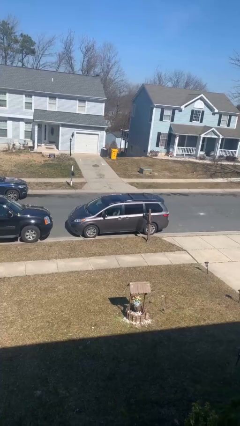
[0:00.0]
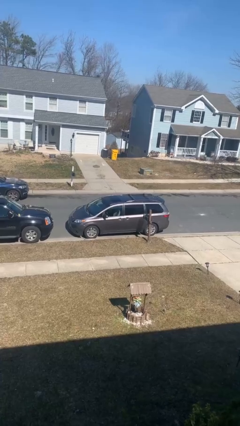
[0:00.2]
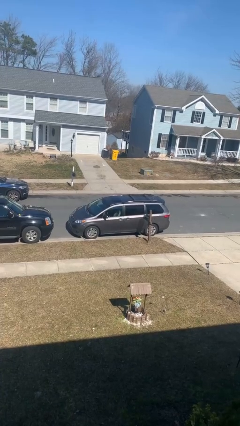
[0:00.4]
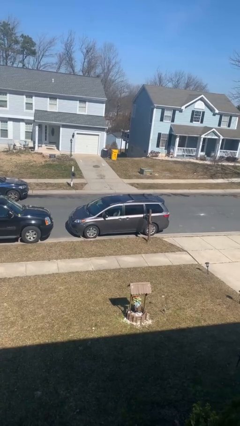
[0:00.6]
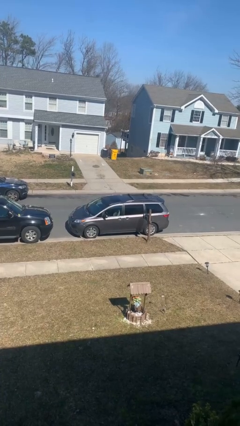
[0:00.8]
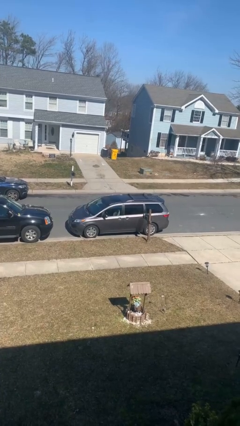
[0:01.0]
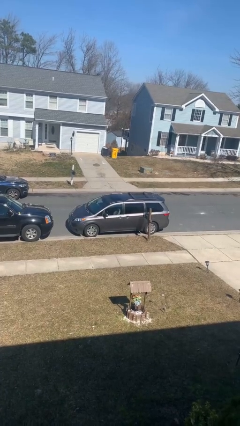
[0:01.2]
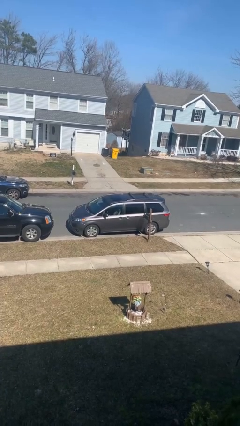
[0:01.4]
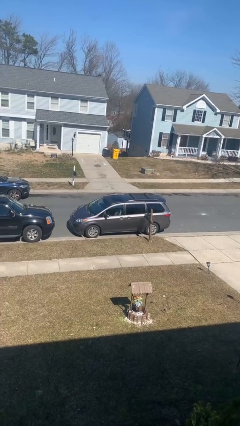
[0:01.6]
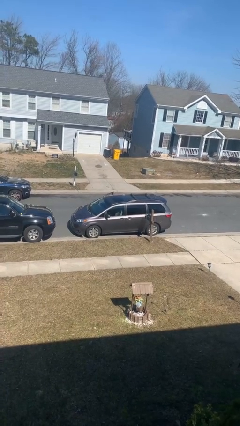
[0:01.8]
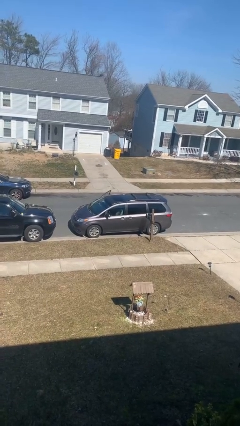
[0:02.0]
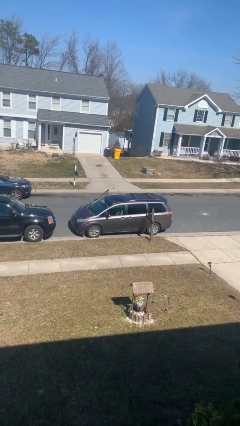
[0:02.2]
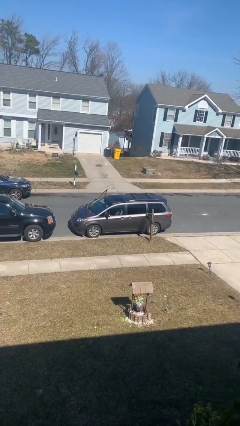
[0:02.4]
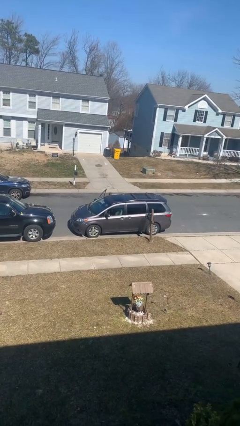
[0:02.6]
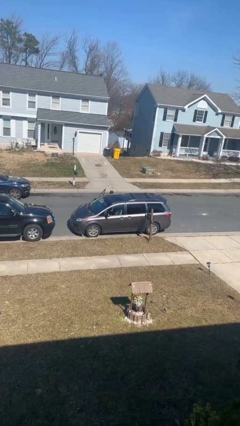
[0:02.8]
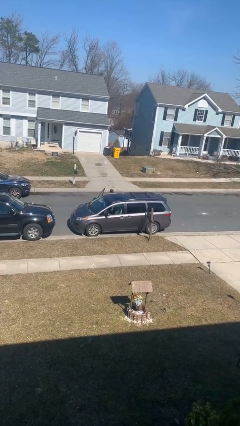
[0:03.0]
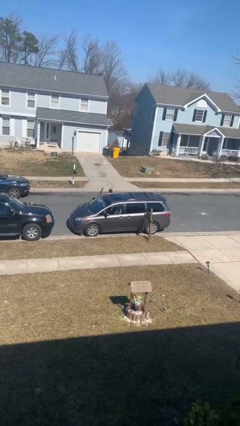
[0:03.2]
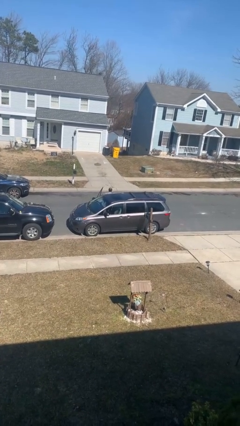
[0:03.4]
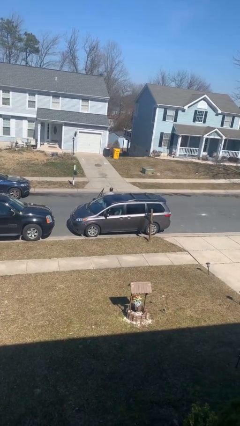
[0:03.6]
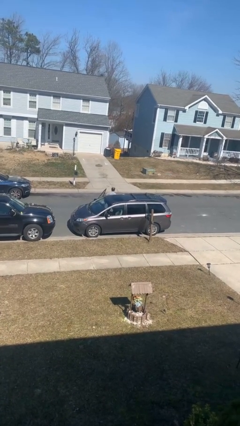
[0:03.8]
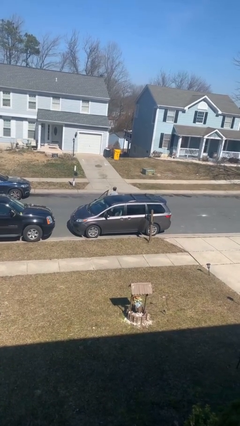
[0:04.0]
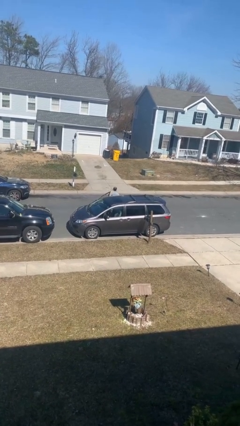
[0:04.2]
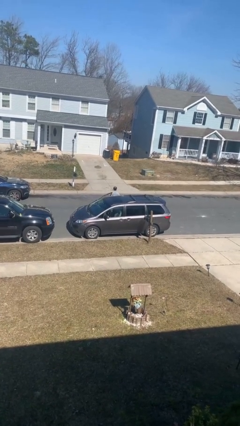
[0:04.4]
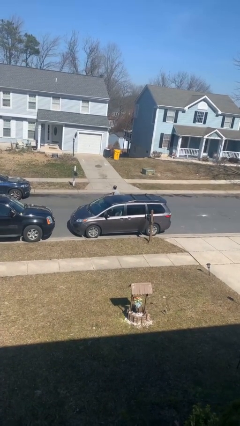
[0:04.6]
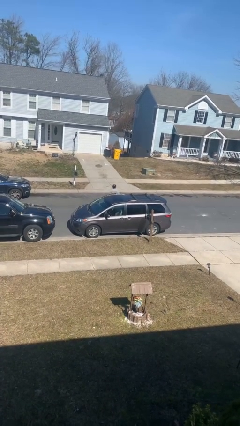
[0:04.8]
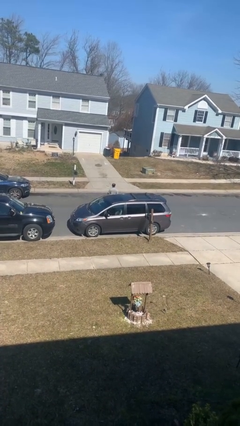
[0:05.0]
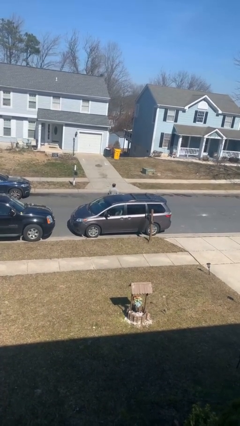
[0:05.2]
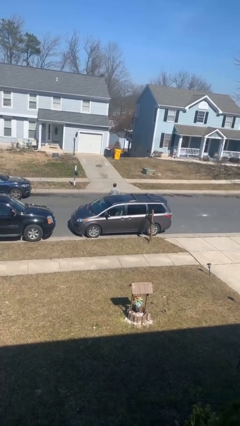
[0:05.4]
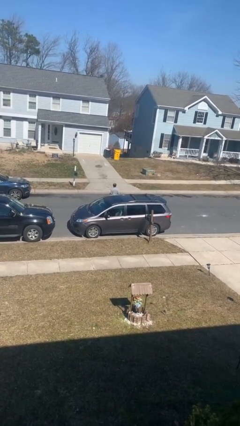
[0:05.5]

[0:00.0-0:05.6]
car drops off person

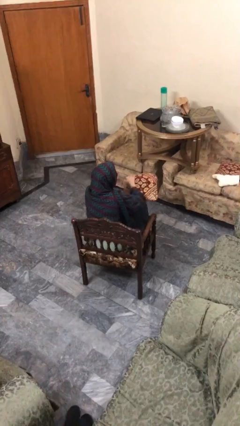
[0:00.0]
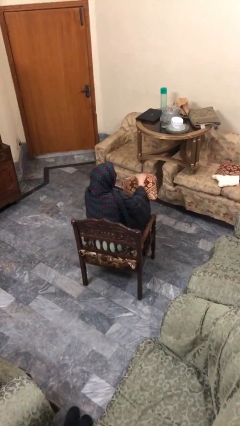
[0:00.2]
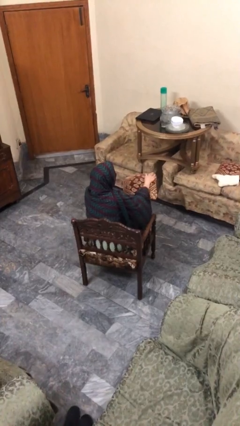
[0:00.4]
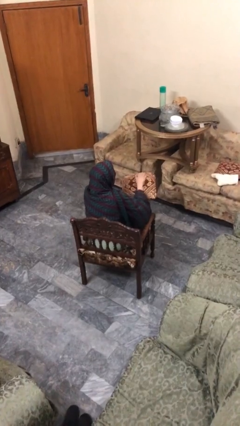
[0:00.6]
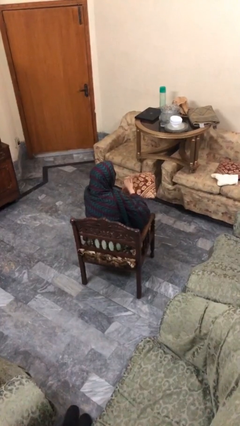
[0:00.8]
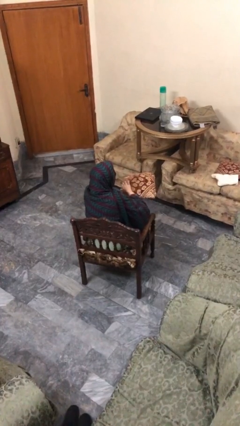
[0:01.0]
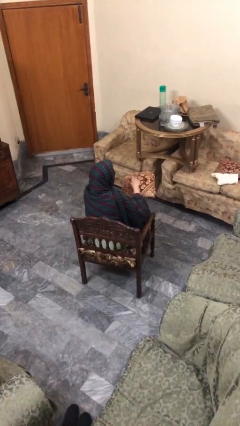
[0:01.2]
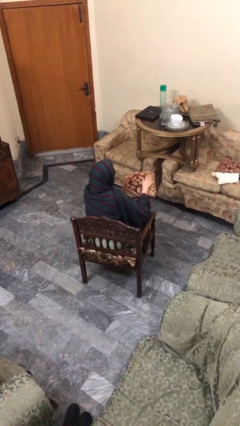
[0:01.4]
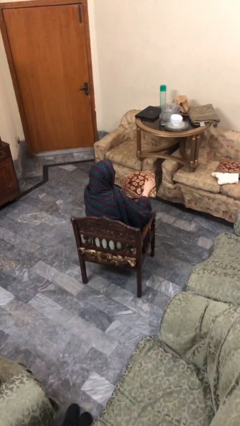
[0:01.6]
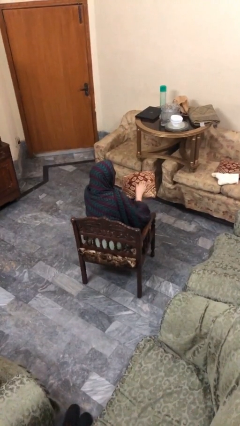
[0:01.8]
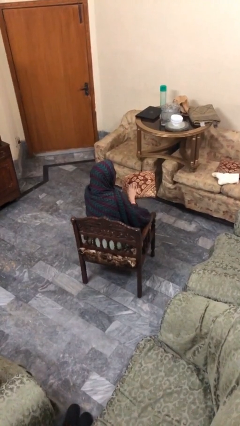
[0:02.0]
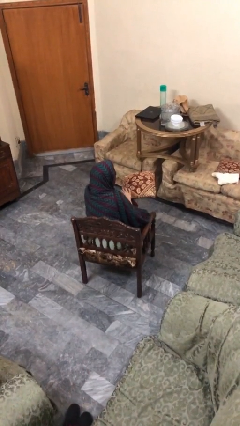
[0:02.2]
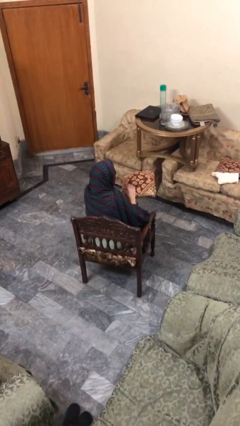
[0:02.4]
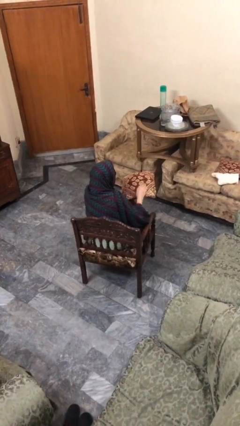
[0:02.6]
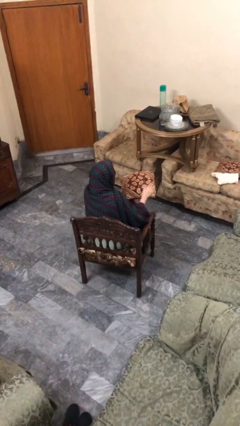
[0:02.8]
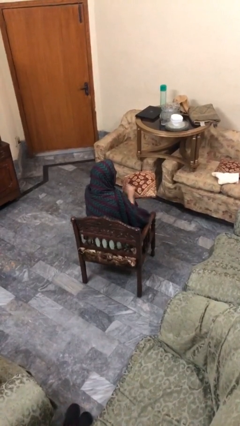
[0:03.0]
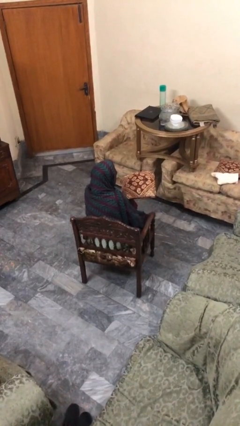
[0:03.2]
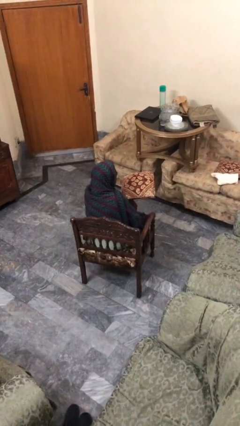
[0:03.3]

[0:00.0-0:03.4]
person waves hand over object

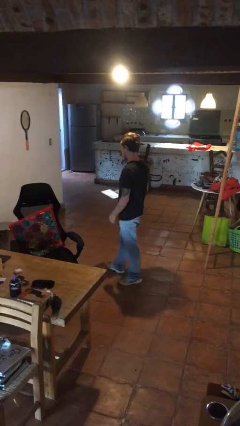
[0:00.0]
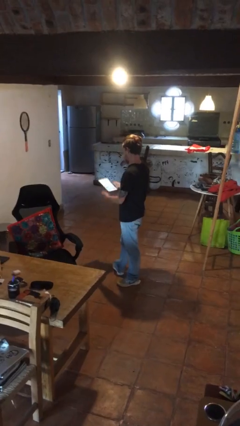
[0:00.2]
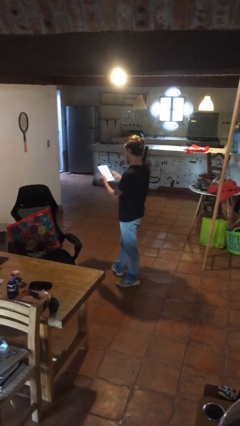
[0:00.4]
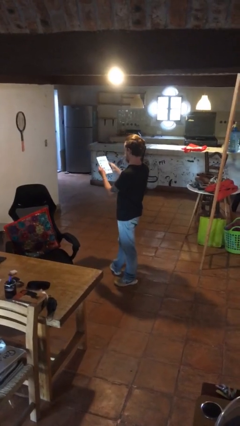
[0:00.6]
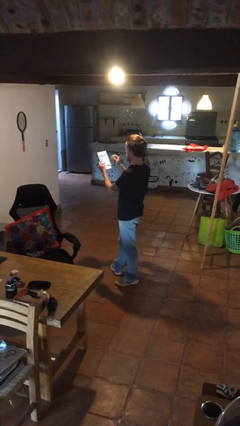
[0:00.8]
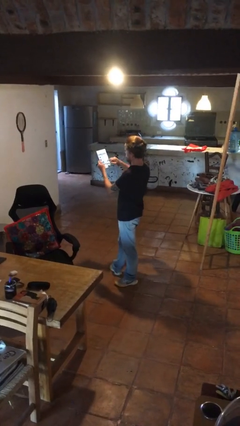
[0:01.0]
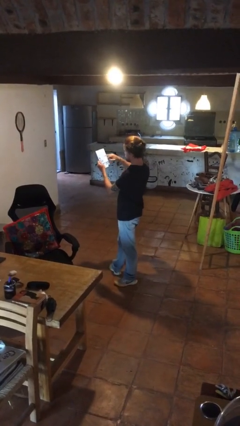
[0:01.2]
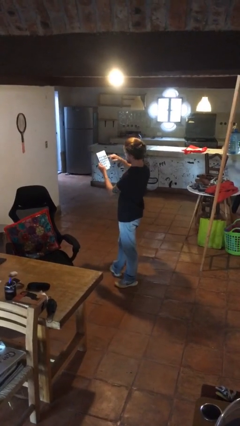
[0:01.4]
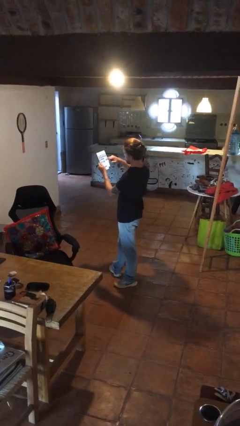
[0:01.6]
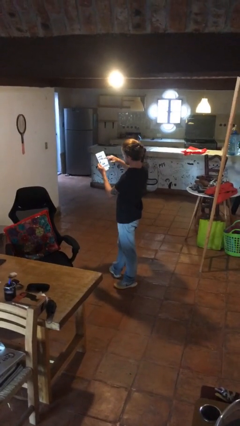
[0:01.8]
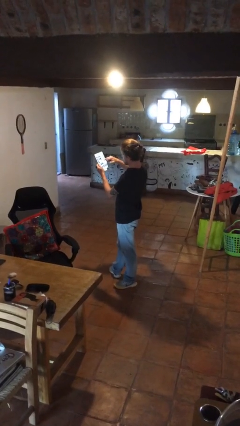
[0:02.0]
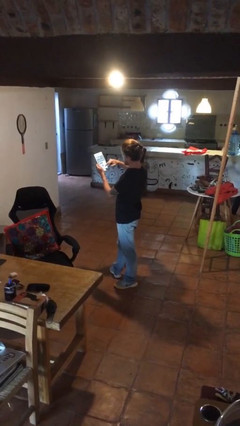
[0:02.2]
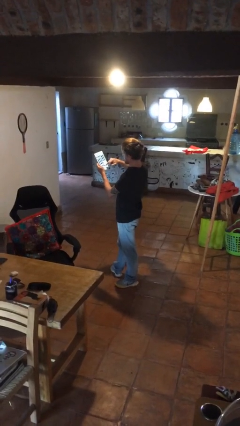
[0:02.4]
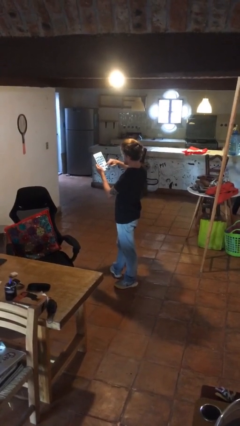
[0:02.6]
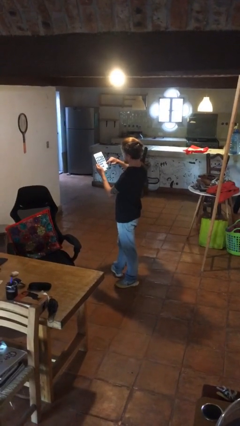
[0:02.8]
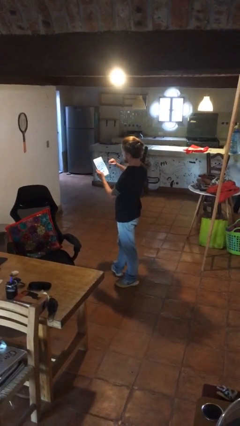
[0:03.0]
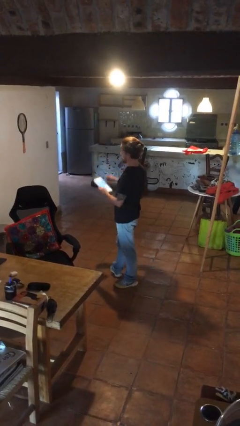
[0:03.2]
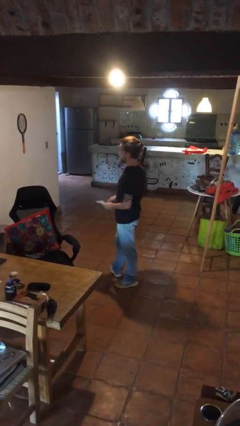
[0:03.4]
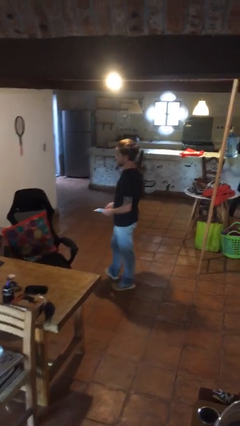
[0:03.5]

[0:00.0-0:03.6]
person interacts with tablet

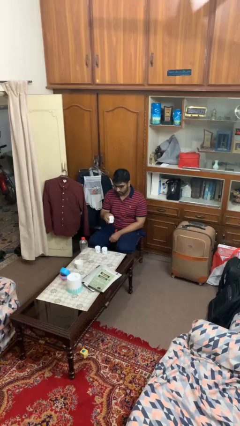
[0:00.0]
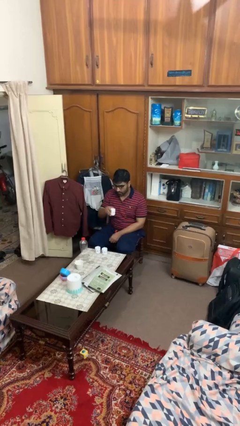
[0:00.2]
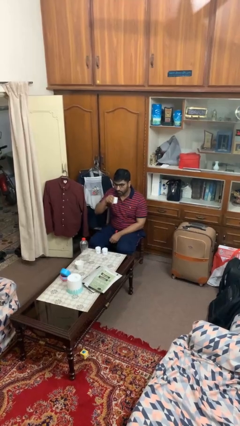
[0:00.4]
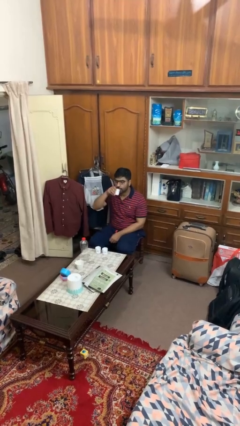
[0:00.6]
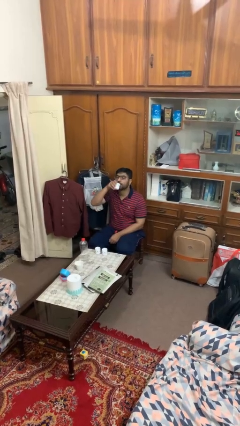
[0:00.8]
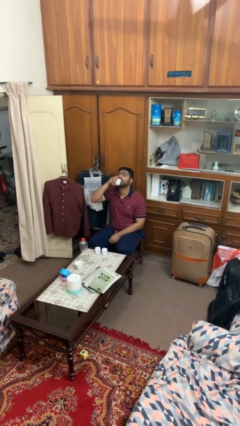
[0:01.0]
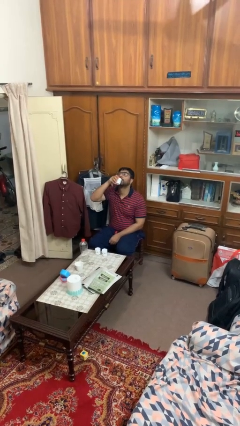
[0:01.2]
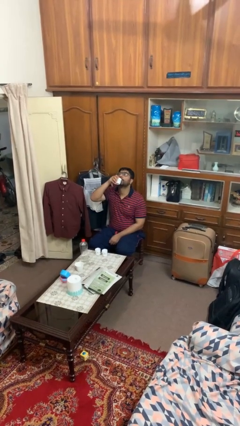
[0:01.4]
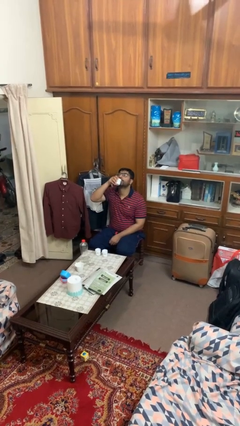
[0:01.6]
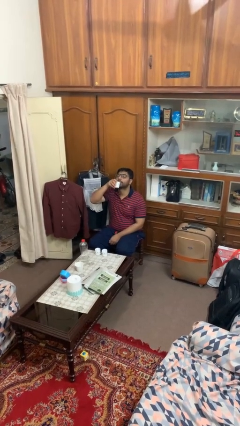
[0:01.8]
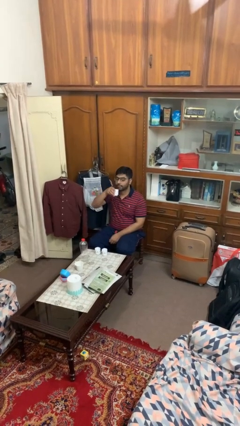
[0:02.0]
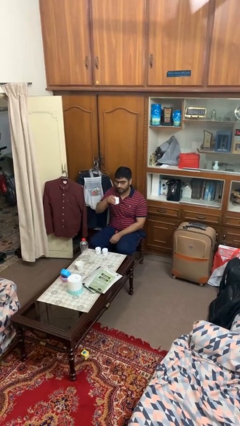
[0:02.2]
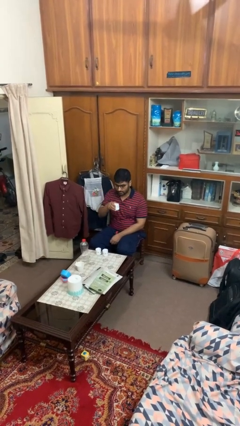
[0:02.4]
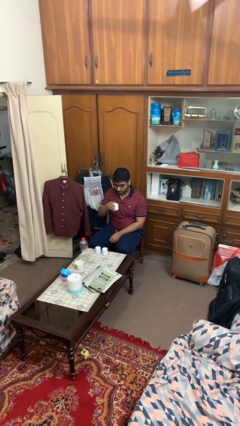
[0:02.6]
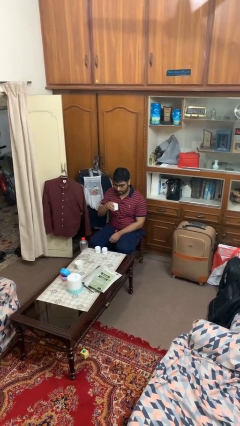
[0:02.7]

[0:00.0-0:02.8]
person drinks from shotglass

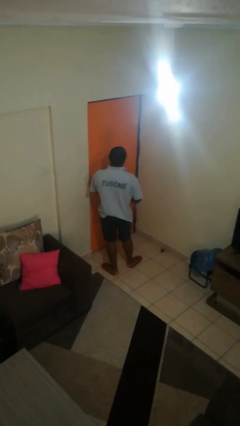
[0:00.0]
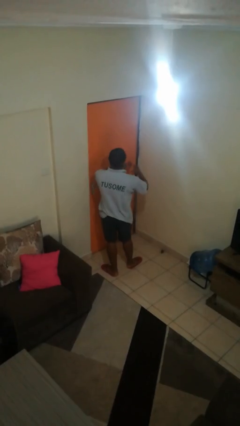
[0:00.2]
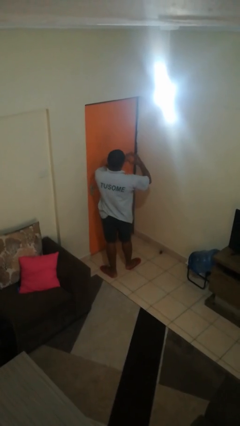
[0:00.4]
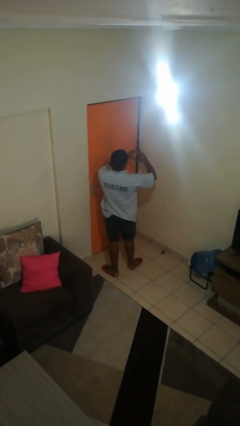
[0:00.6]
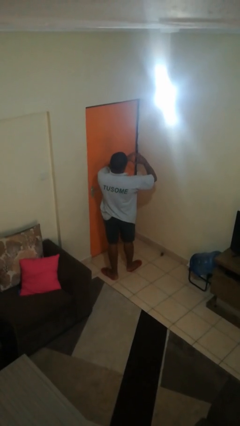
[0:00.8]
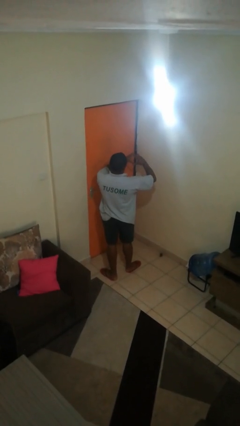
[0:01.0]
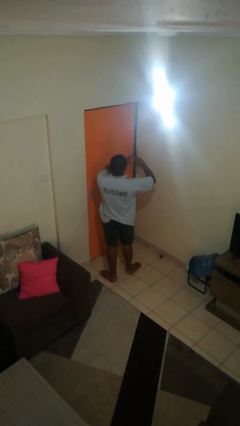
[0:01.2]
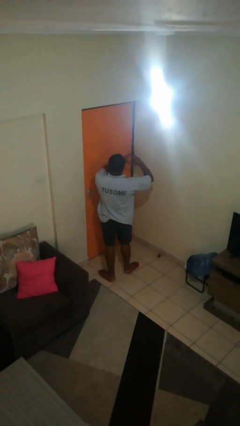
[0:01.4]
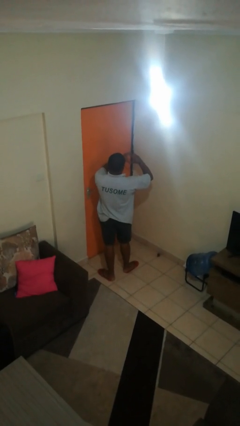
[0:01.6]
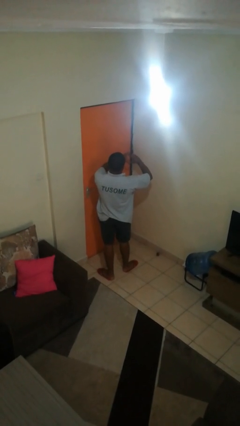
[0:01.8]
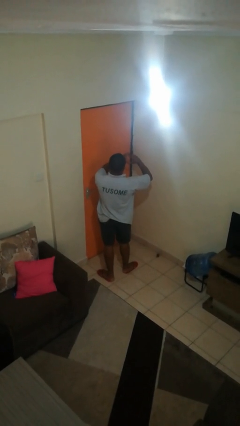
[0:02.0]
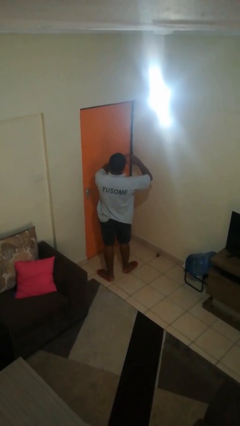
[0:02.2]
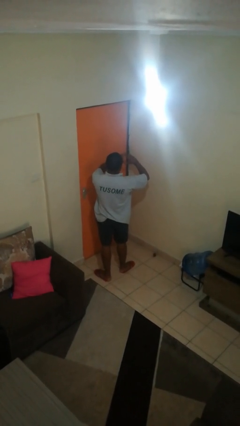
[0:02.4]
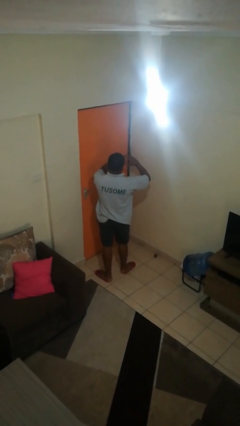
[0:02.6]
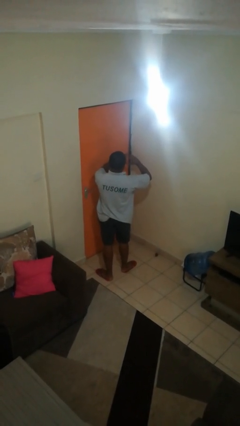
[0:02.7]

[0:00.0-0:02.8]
person gestures heart
